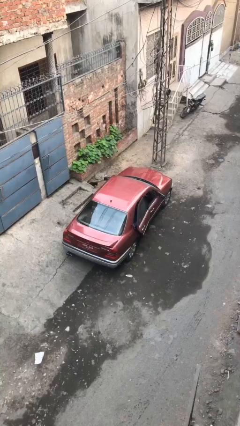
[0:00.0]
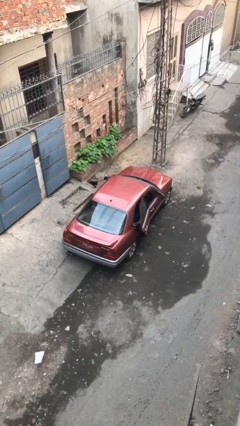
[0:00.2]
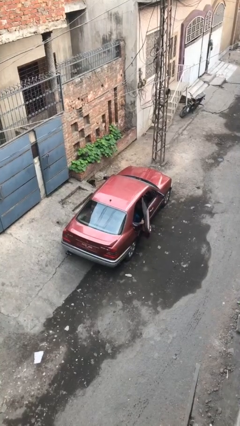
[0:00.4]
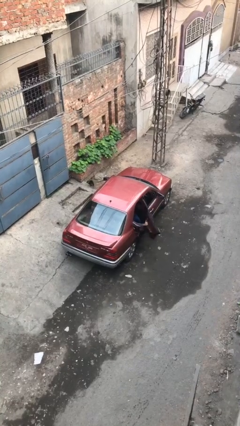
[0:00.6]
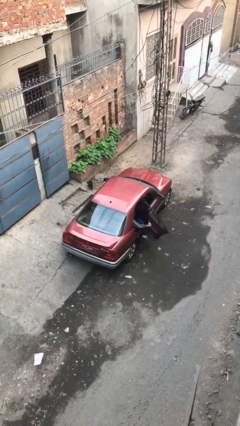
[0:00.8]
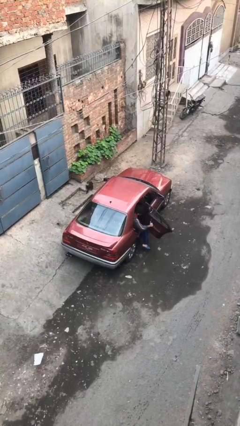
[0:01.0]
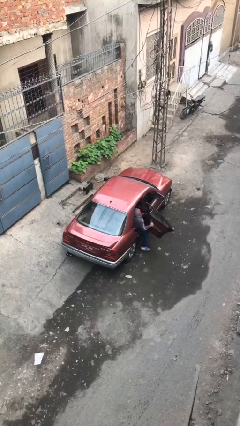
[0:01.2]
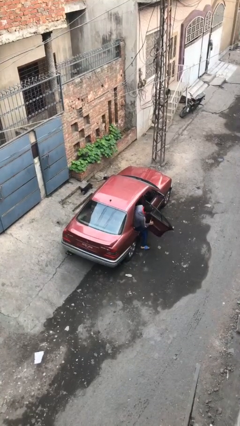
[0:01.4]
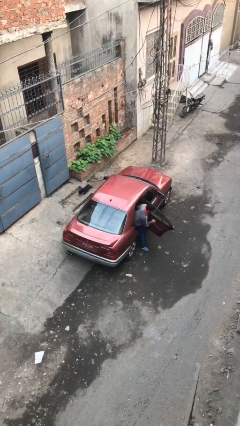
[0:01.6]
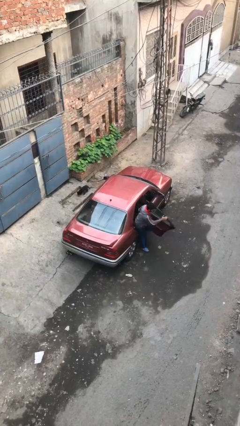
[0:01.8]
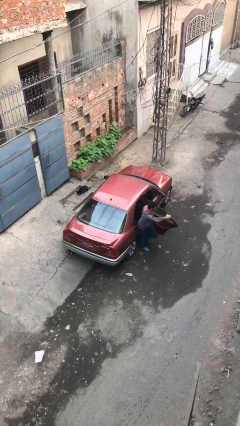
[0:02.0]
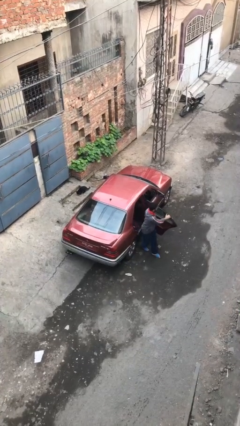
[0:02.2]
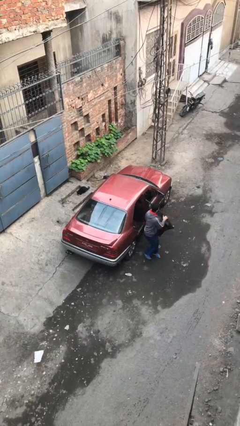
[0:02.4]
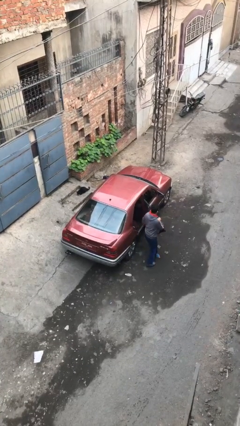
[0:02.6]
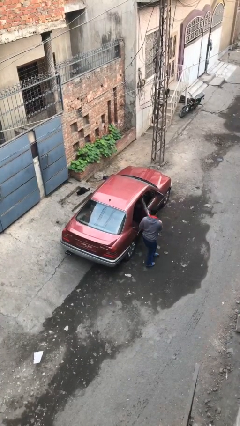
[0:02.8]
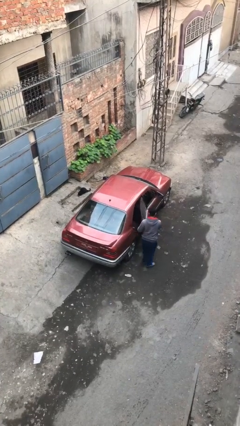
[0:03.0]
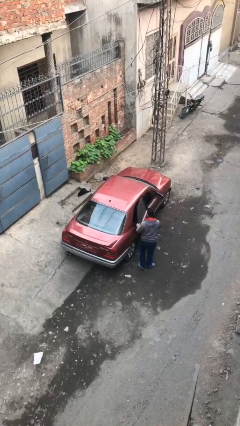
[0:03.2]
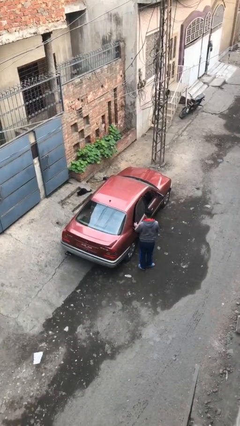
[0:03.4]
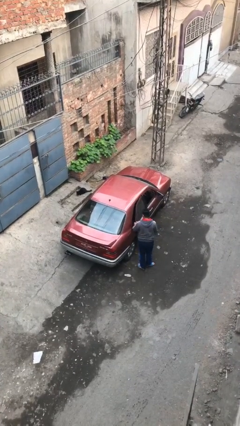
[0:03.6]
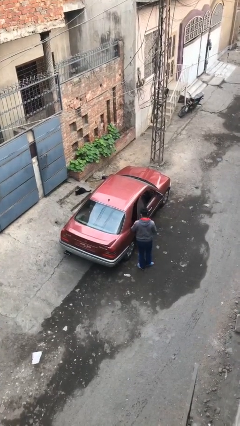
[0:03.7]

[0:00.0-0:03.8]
car drops off person

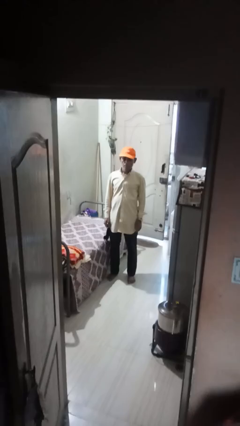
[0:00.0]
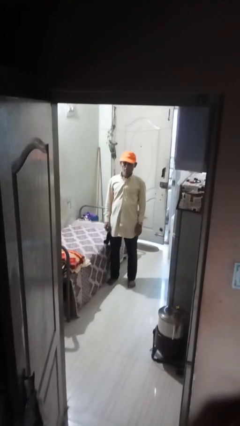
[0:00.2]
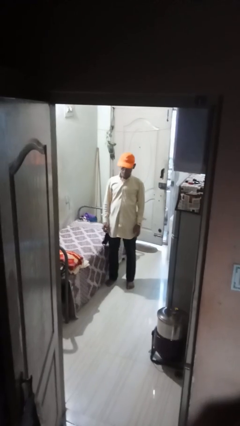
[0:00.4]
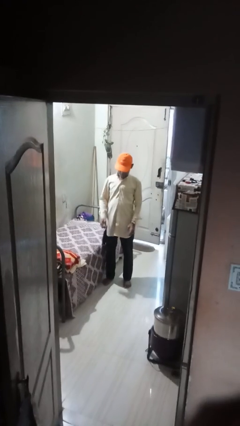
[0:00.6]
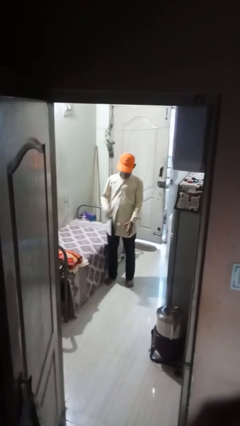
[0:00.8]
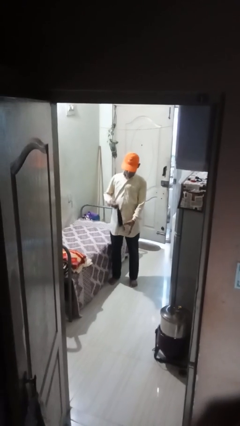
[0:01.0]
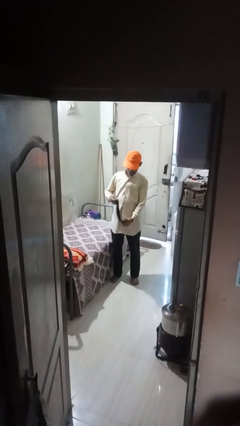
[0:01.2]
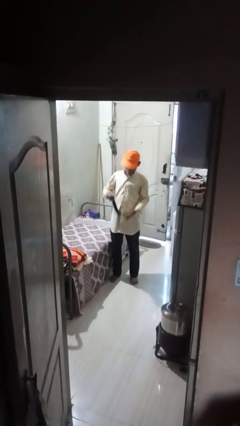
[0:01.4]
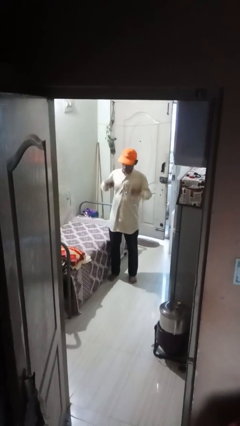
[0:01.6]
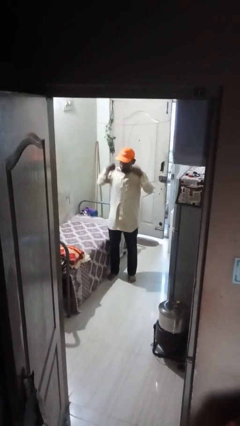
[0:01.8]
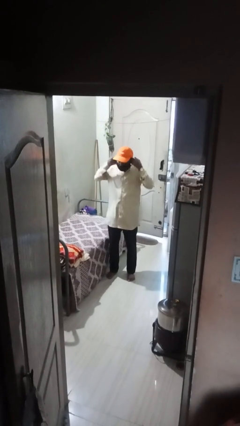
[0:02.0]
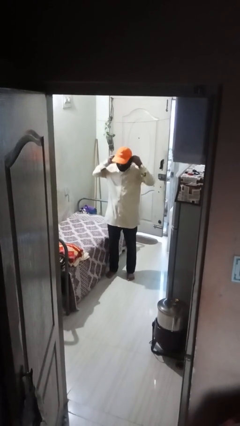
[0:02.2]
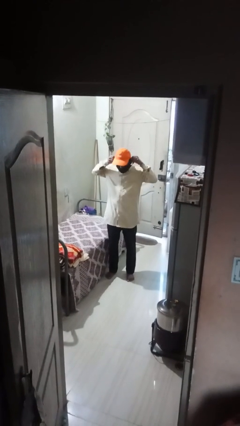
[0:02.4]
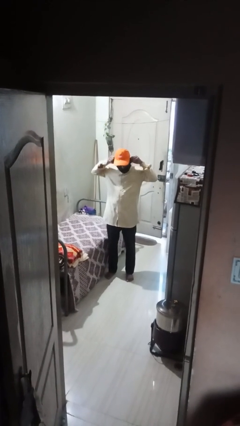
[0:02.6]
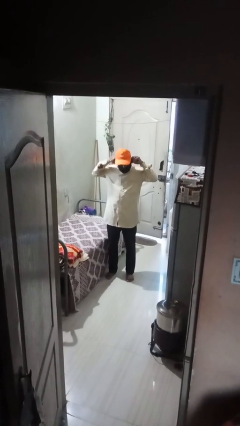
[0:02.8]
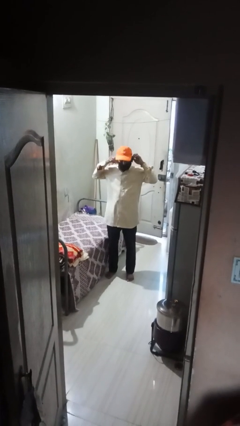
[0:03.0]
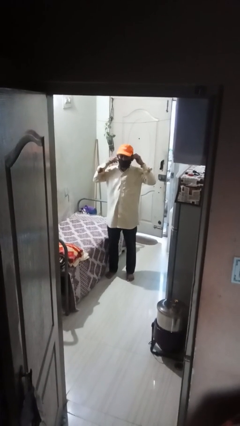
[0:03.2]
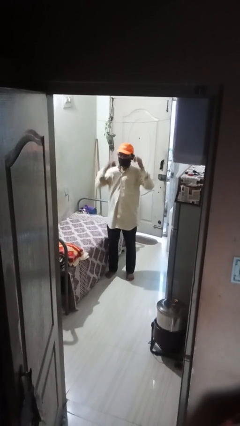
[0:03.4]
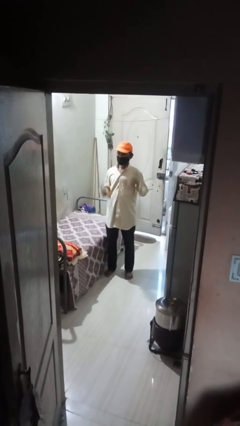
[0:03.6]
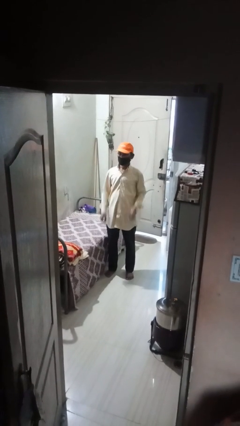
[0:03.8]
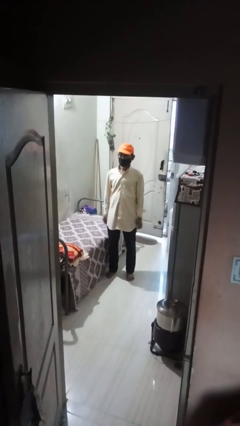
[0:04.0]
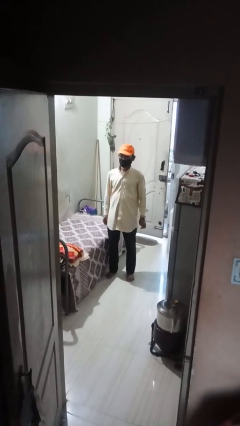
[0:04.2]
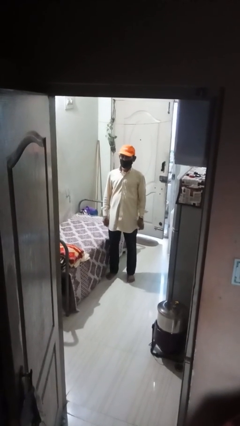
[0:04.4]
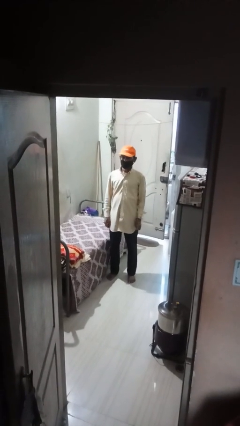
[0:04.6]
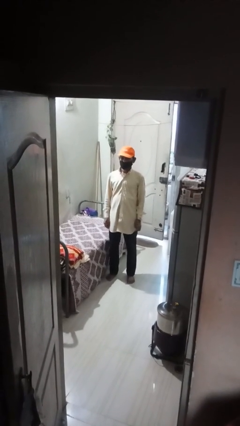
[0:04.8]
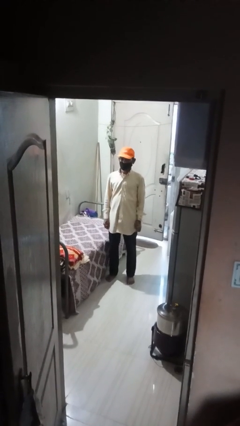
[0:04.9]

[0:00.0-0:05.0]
person puts on facemask

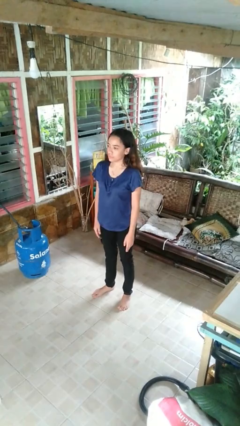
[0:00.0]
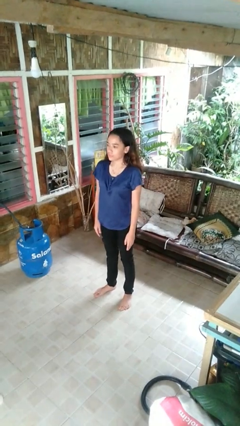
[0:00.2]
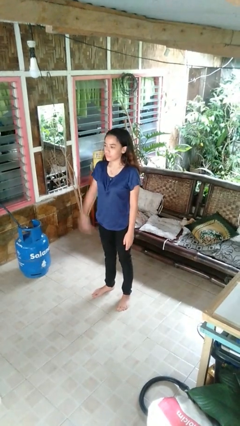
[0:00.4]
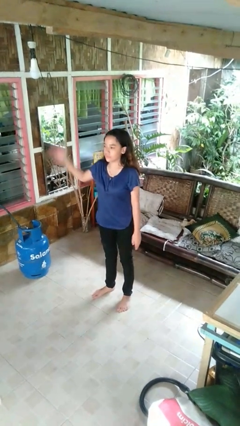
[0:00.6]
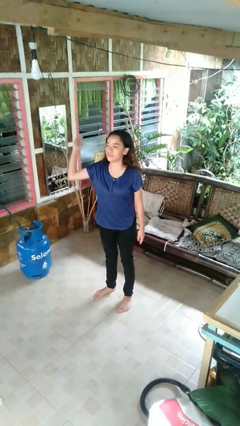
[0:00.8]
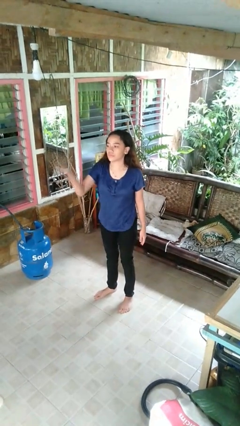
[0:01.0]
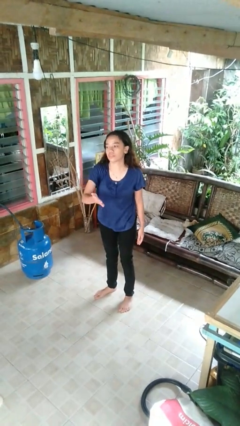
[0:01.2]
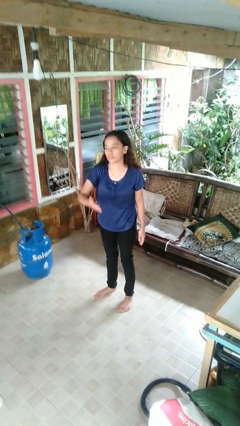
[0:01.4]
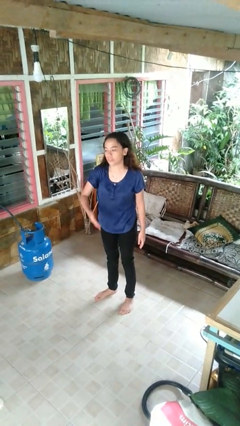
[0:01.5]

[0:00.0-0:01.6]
person karate chop

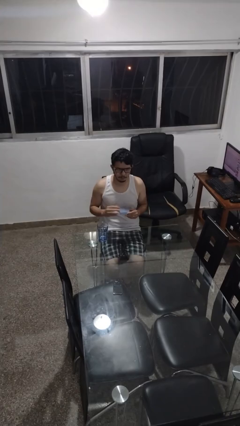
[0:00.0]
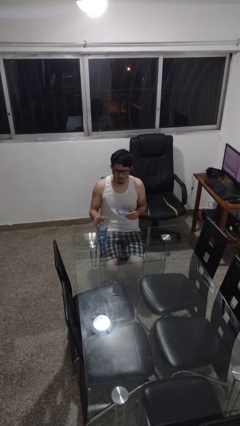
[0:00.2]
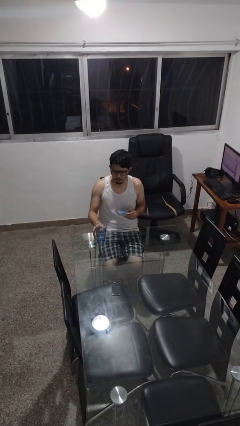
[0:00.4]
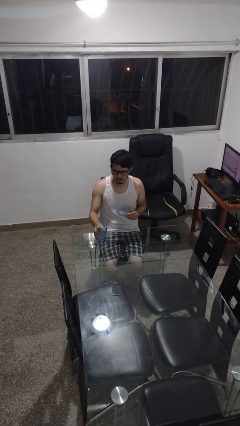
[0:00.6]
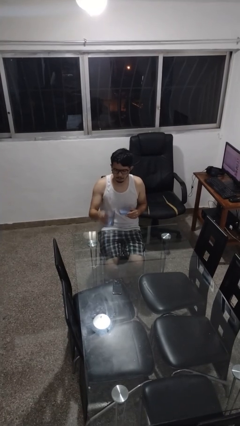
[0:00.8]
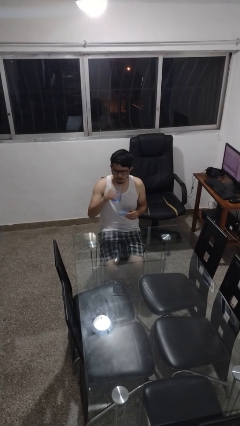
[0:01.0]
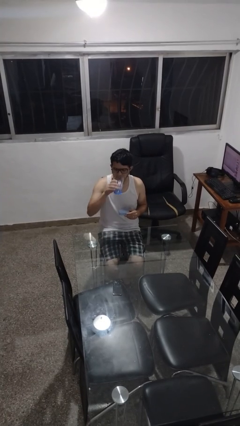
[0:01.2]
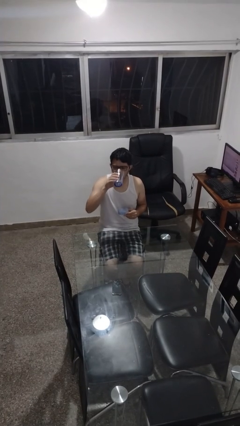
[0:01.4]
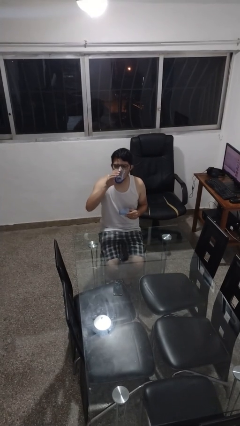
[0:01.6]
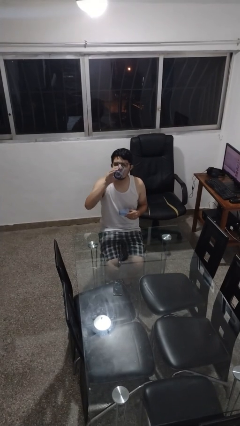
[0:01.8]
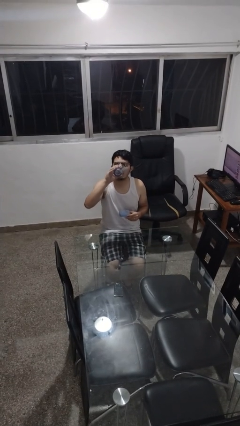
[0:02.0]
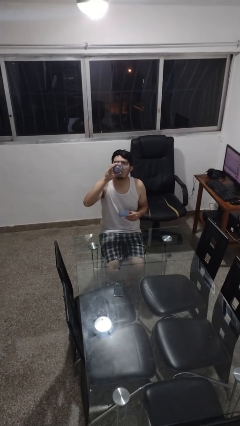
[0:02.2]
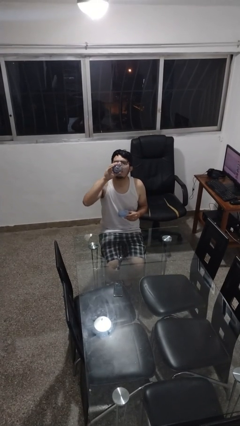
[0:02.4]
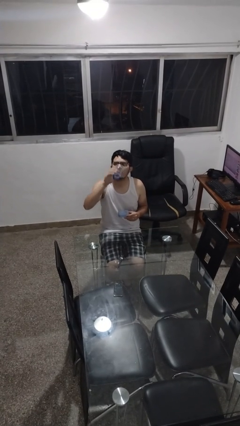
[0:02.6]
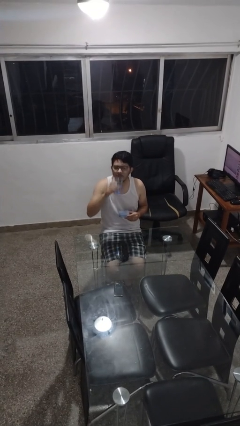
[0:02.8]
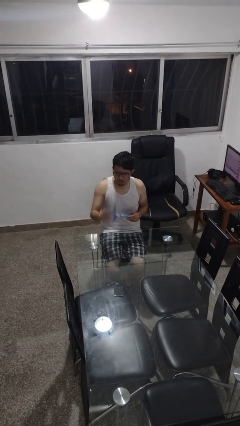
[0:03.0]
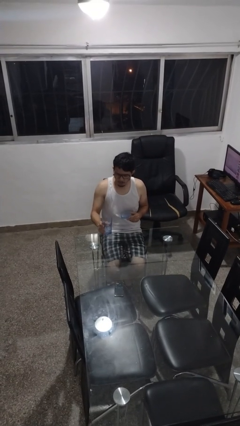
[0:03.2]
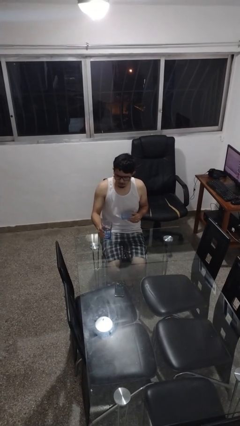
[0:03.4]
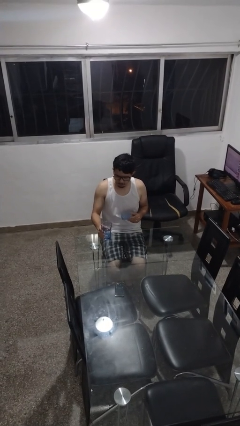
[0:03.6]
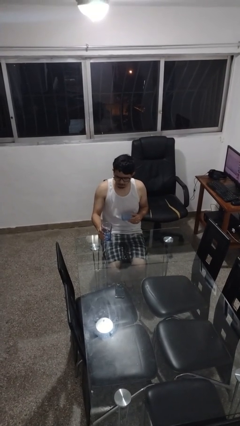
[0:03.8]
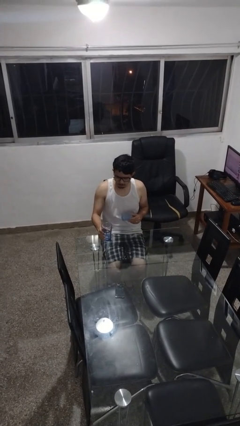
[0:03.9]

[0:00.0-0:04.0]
person drinks from cup

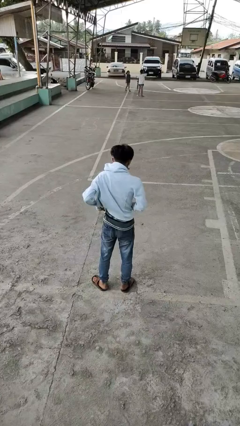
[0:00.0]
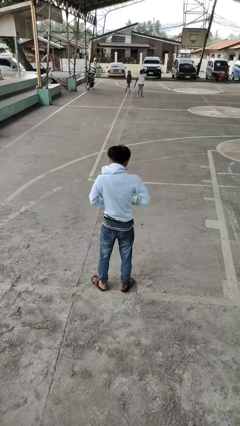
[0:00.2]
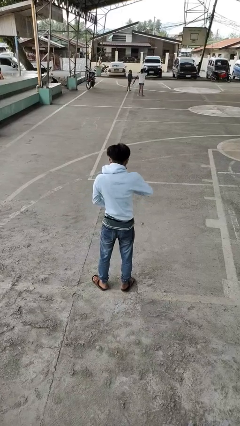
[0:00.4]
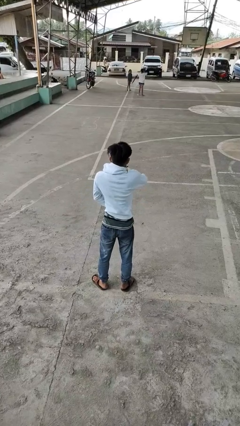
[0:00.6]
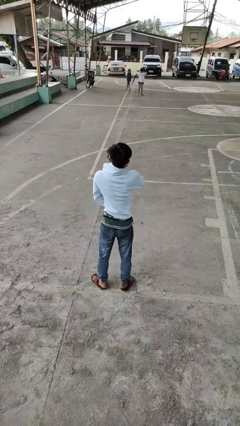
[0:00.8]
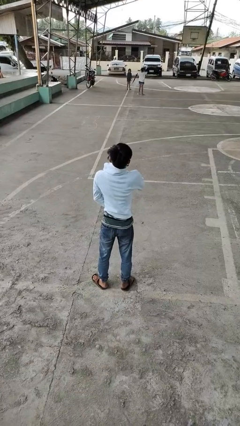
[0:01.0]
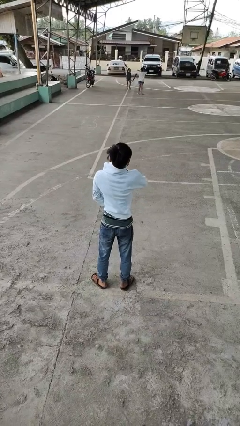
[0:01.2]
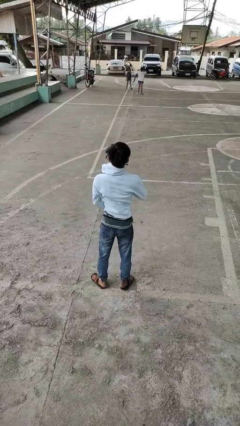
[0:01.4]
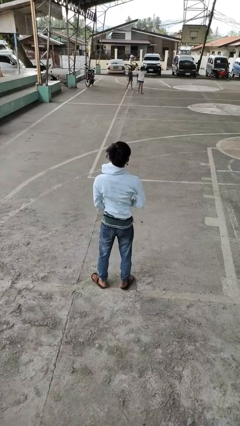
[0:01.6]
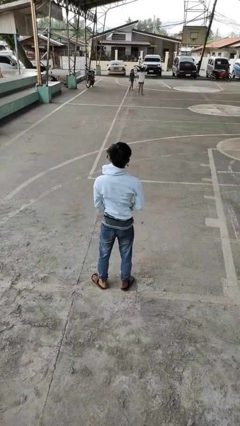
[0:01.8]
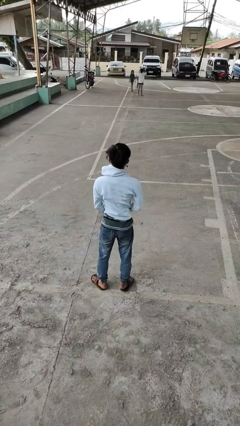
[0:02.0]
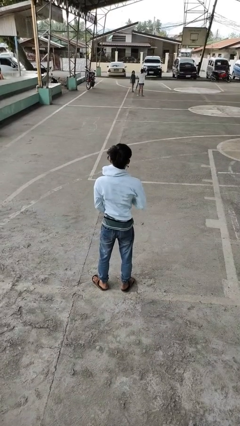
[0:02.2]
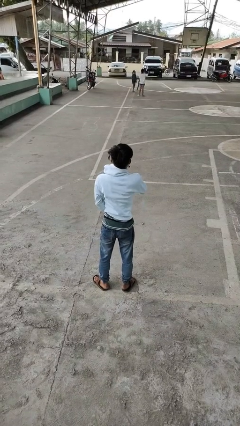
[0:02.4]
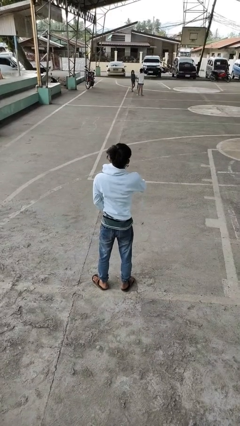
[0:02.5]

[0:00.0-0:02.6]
person zips up jacket

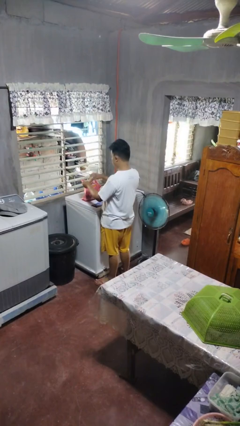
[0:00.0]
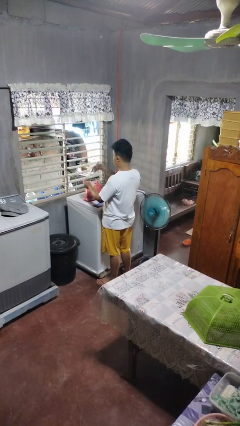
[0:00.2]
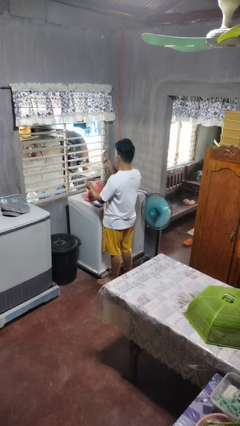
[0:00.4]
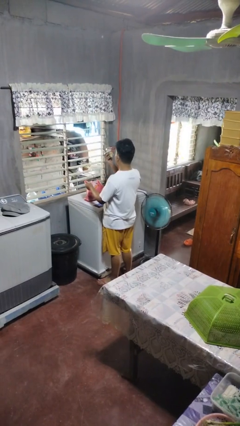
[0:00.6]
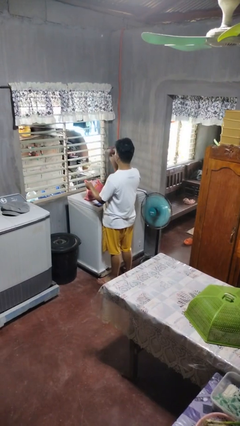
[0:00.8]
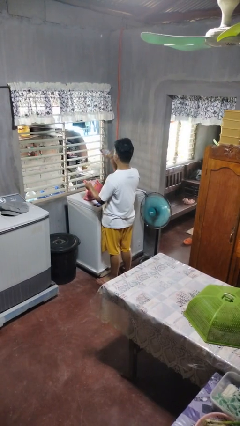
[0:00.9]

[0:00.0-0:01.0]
person takes object from bag
